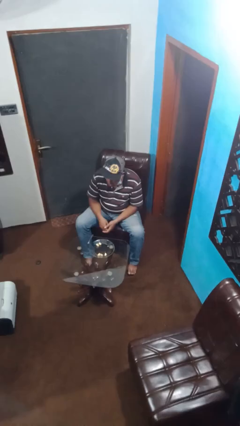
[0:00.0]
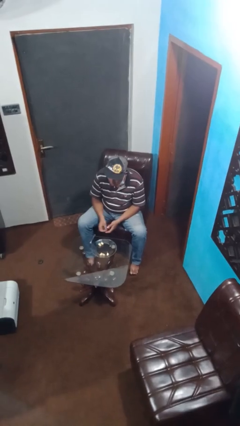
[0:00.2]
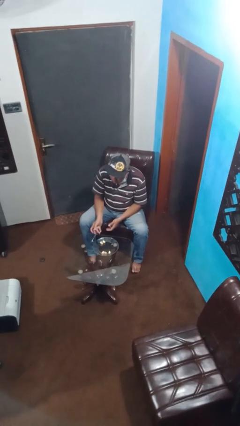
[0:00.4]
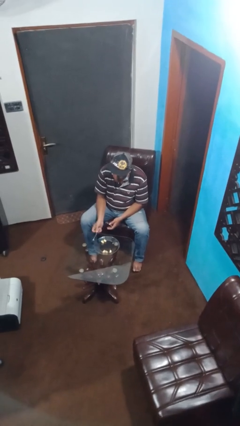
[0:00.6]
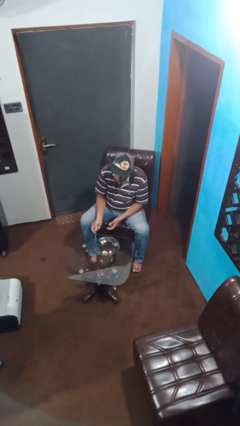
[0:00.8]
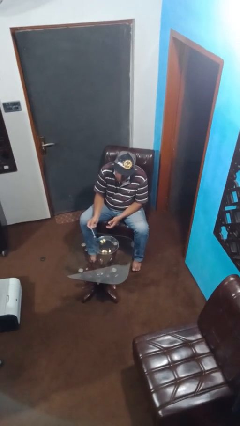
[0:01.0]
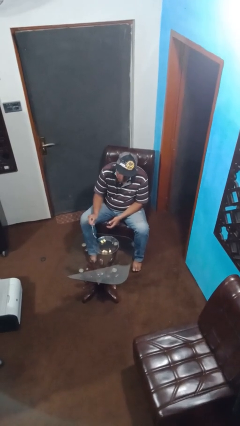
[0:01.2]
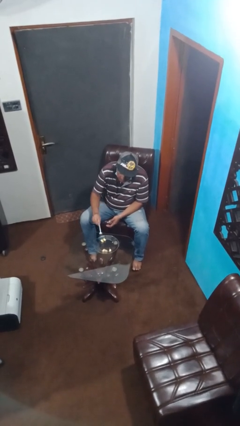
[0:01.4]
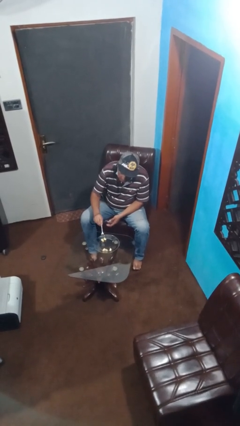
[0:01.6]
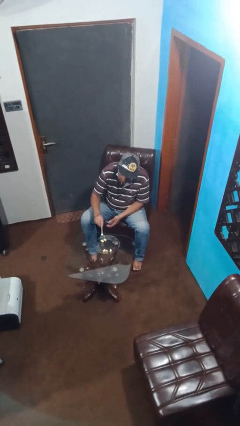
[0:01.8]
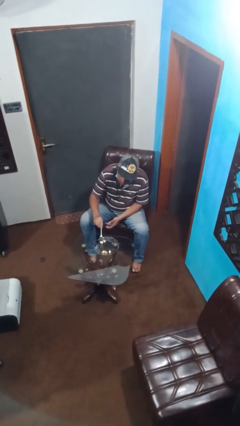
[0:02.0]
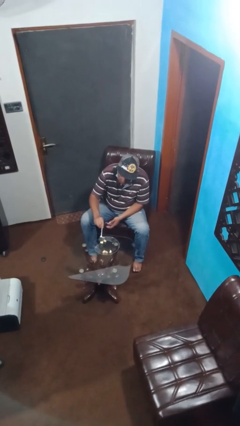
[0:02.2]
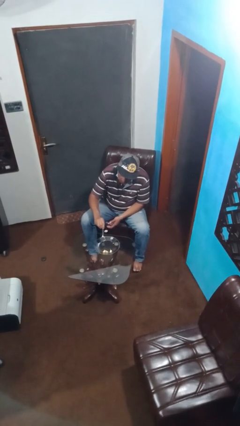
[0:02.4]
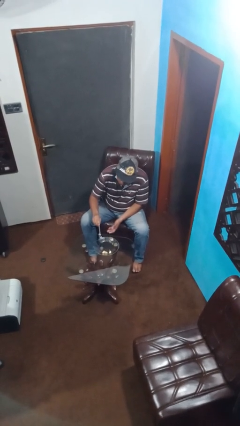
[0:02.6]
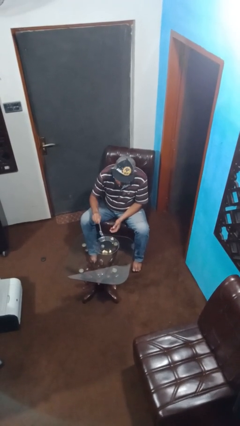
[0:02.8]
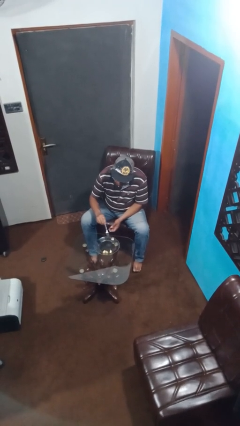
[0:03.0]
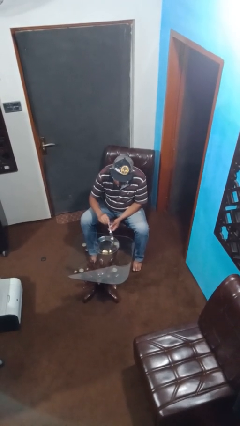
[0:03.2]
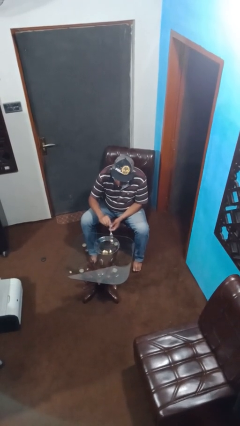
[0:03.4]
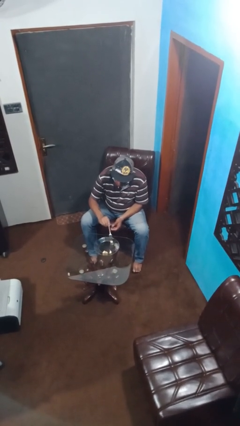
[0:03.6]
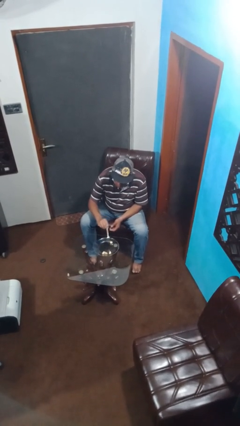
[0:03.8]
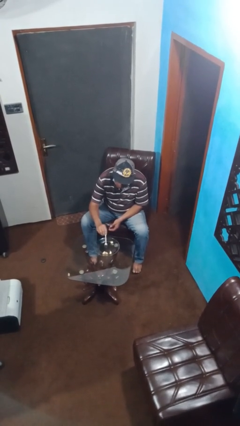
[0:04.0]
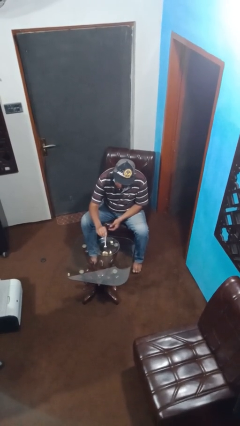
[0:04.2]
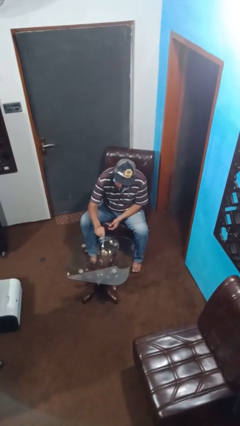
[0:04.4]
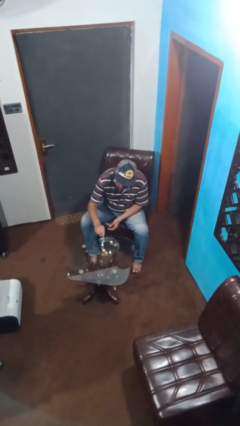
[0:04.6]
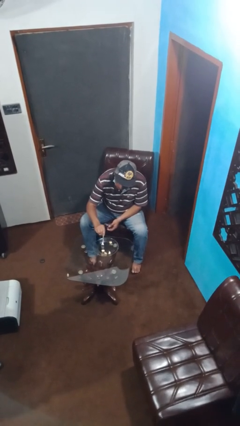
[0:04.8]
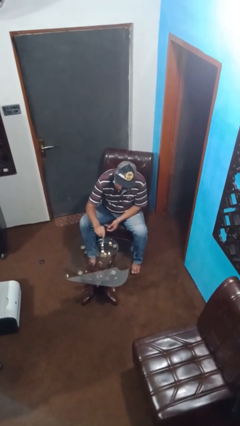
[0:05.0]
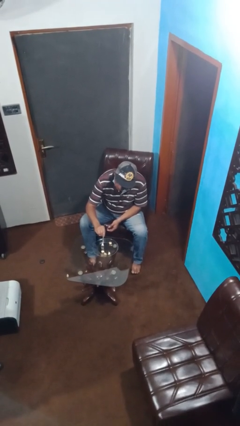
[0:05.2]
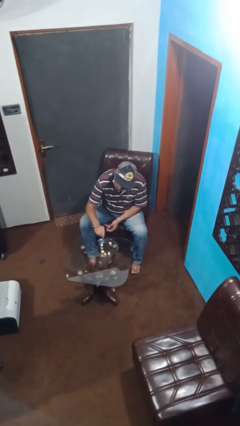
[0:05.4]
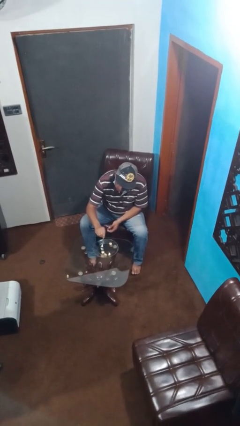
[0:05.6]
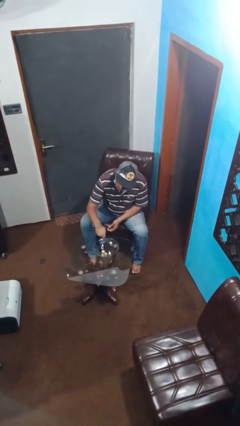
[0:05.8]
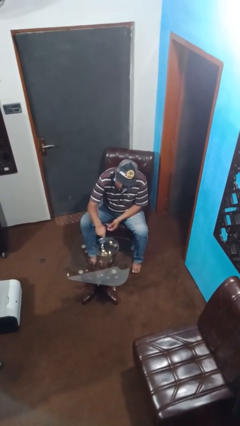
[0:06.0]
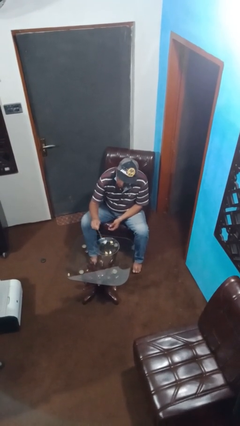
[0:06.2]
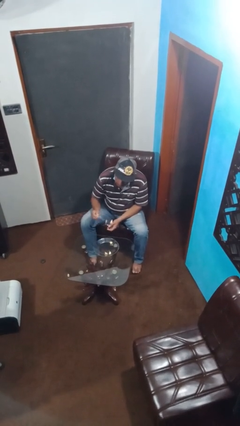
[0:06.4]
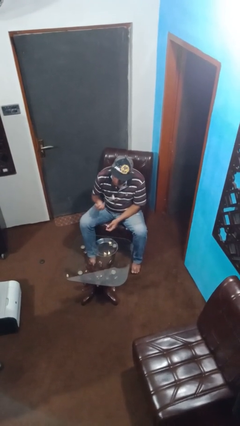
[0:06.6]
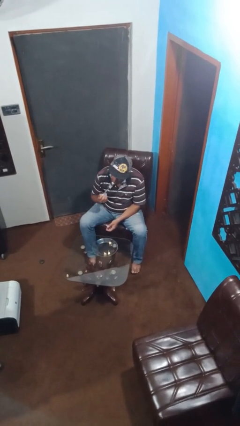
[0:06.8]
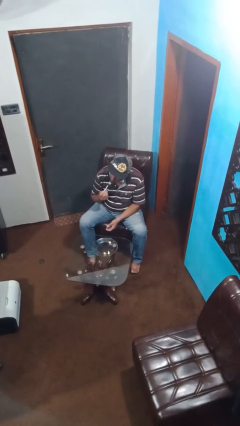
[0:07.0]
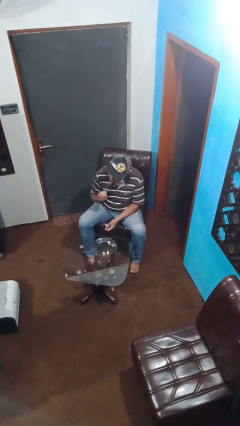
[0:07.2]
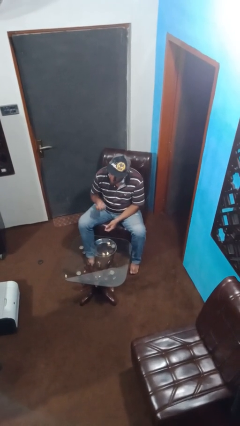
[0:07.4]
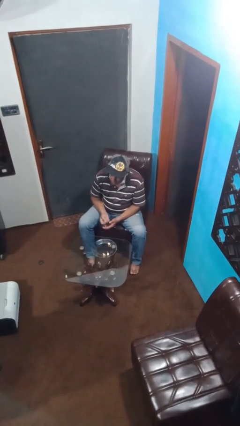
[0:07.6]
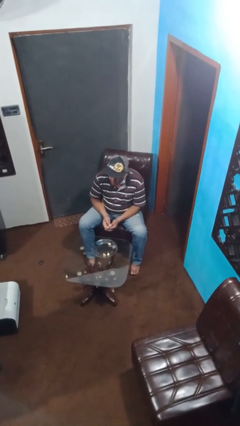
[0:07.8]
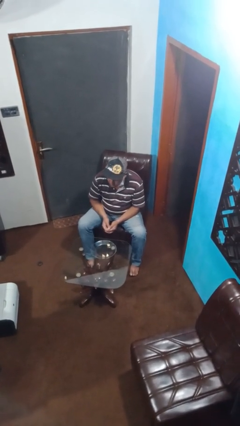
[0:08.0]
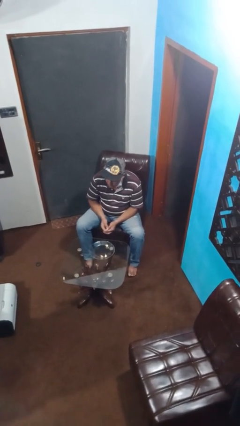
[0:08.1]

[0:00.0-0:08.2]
person eats with utensil

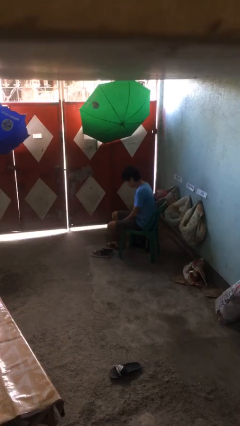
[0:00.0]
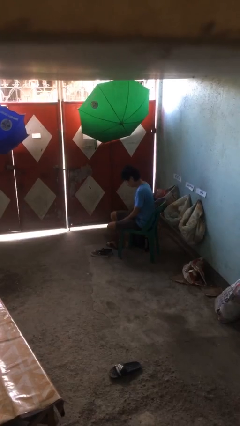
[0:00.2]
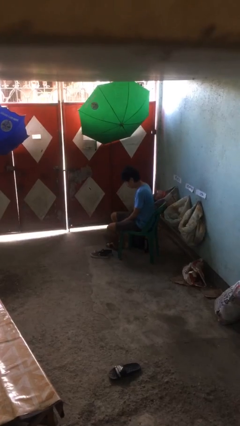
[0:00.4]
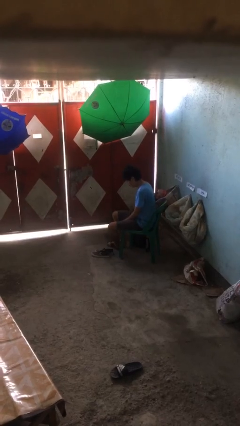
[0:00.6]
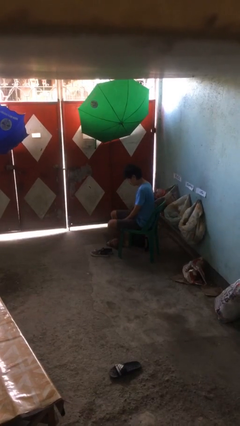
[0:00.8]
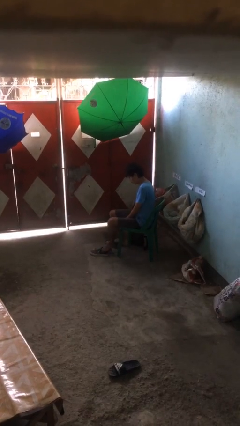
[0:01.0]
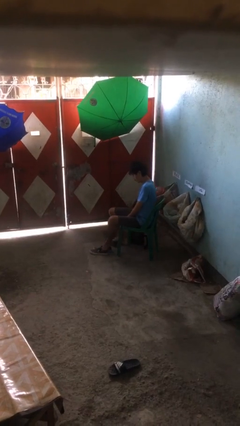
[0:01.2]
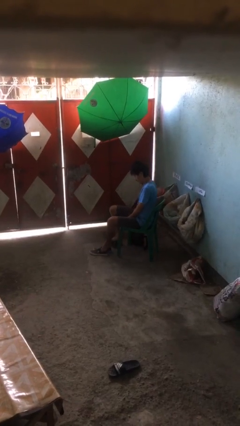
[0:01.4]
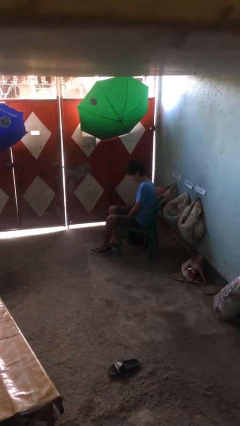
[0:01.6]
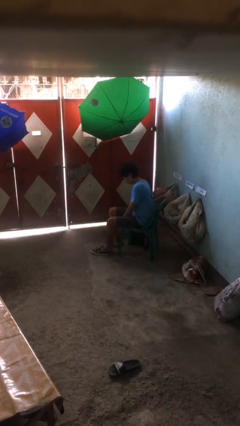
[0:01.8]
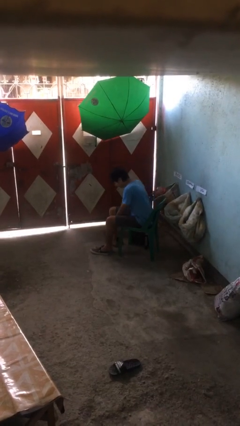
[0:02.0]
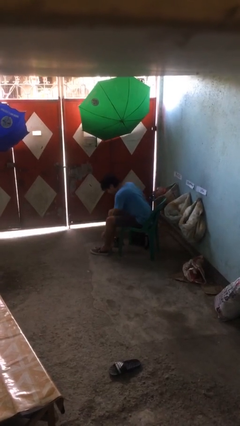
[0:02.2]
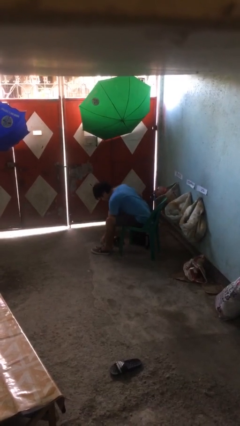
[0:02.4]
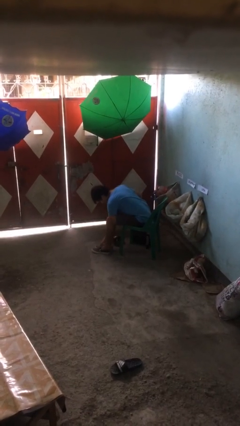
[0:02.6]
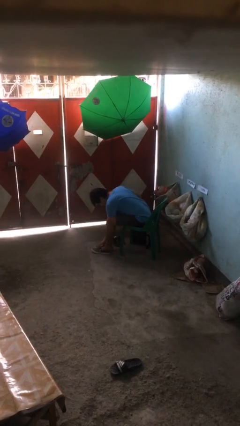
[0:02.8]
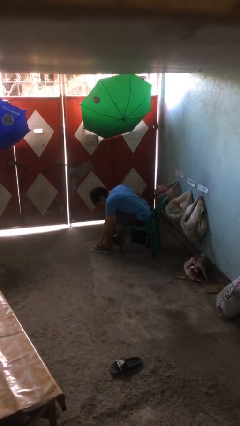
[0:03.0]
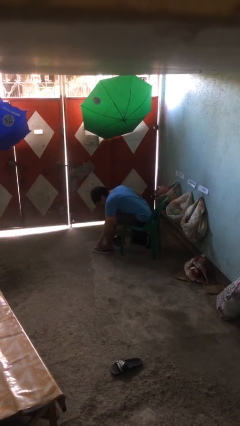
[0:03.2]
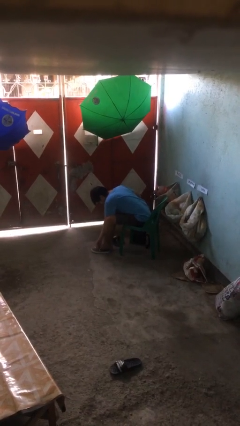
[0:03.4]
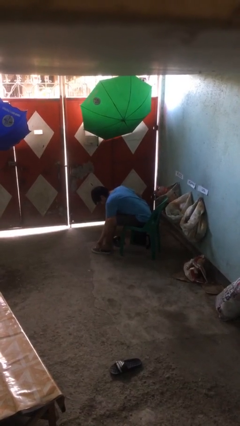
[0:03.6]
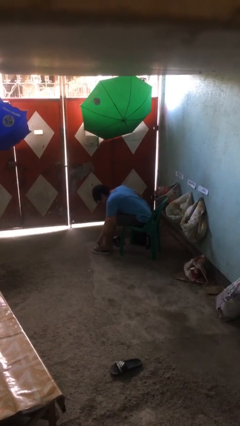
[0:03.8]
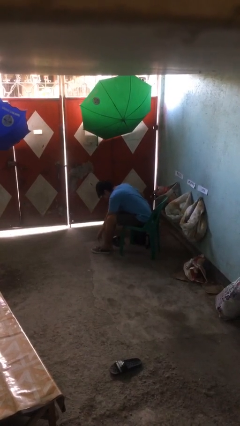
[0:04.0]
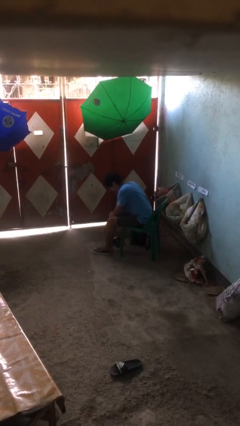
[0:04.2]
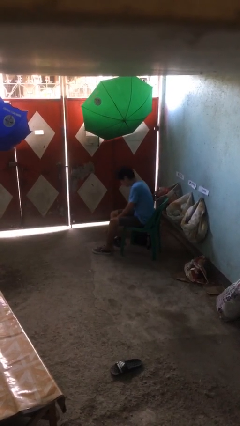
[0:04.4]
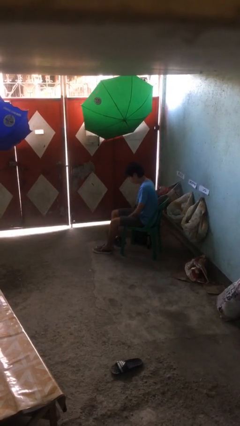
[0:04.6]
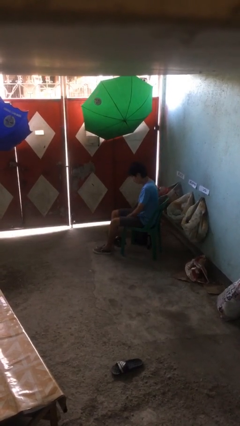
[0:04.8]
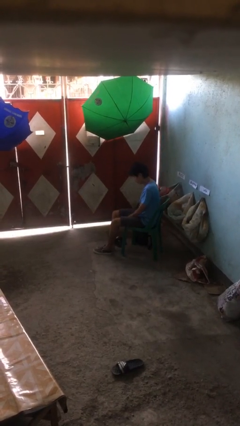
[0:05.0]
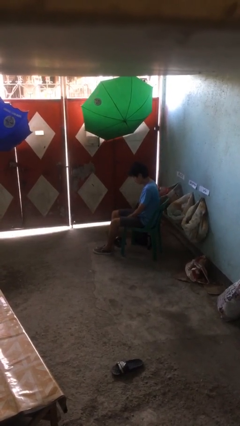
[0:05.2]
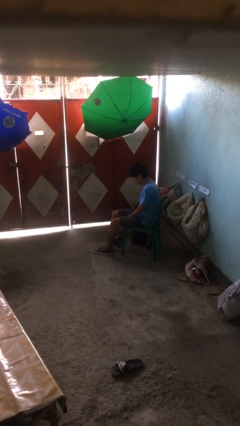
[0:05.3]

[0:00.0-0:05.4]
person puts on shoes

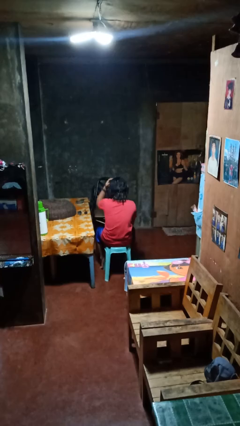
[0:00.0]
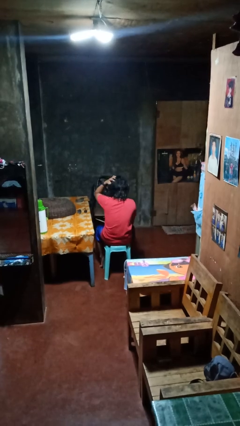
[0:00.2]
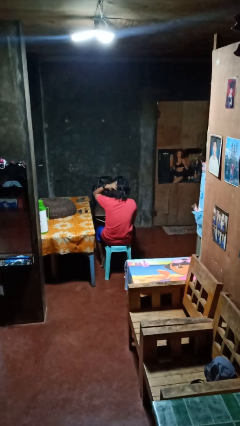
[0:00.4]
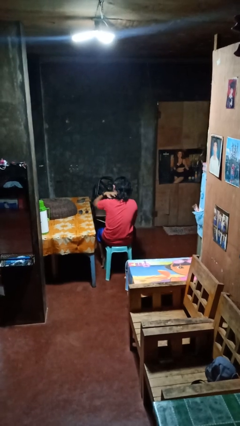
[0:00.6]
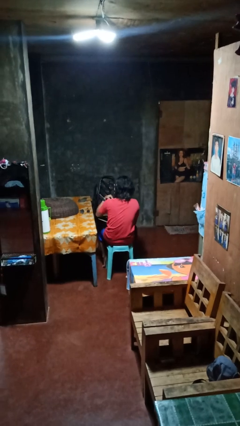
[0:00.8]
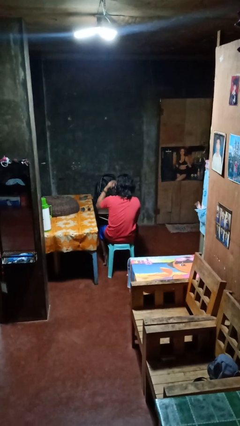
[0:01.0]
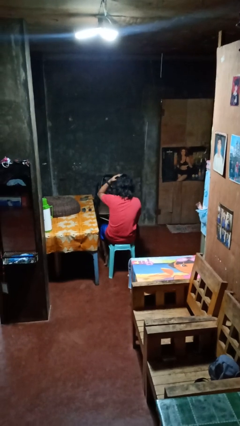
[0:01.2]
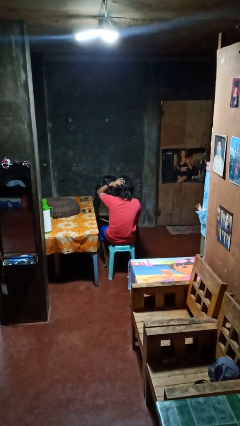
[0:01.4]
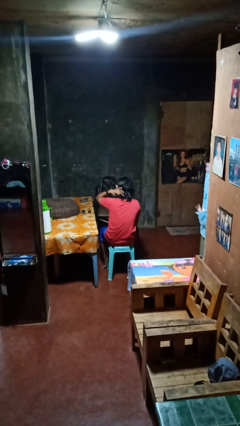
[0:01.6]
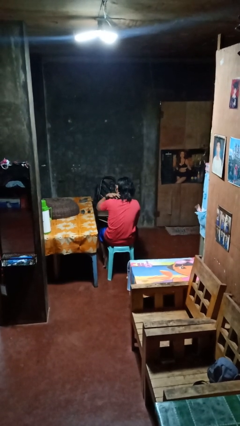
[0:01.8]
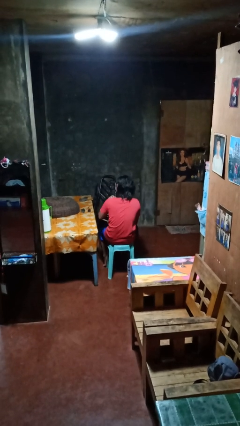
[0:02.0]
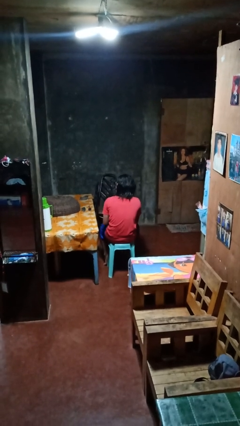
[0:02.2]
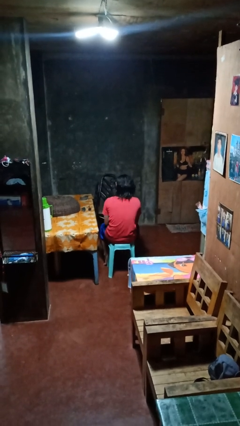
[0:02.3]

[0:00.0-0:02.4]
person strokes hair

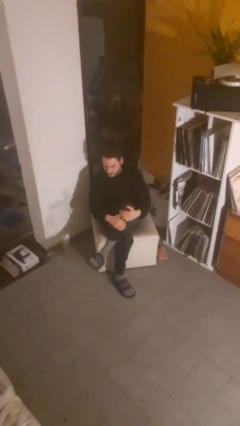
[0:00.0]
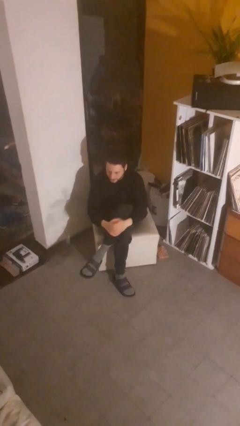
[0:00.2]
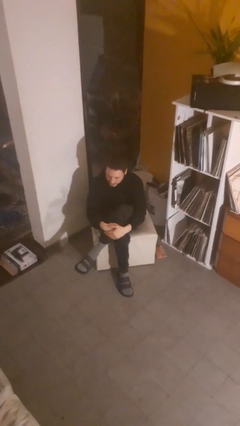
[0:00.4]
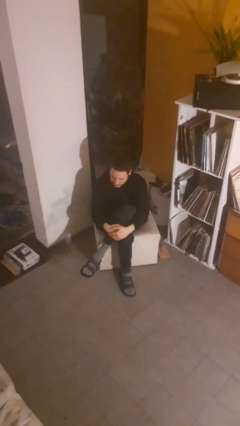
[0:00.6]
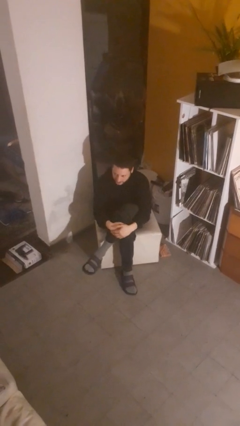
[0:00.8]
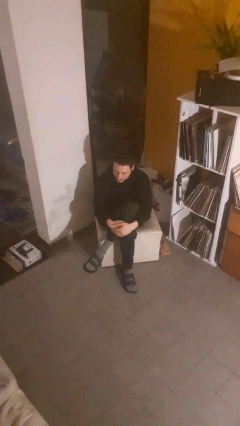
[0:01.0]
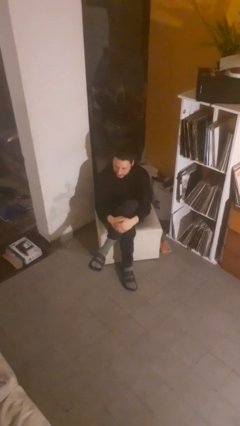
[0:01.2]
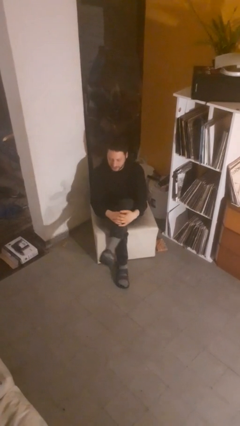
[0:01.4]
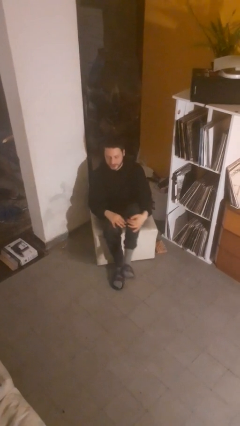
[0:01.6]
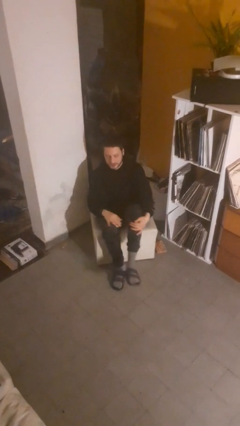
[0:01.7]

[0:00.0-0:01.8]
person crosses legs
